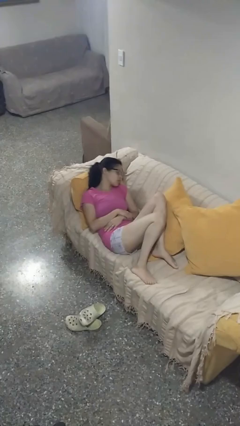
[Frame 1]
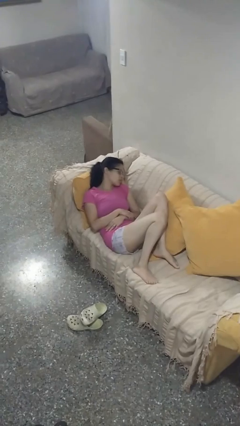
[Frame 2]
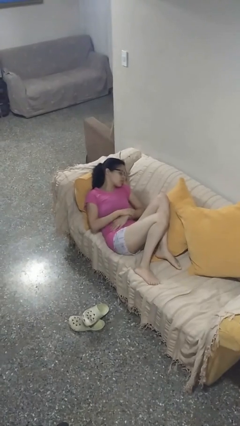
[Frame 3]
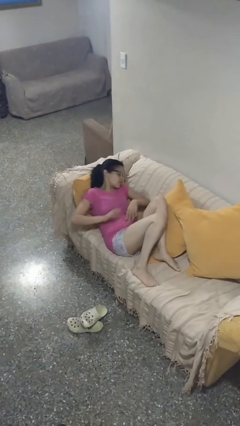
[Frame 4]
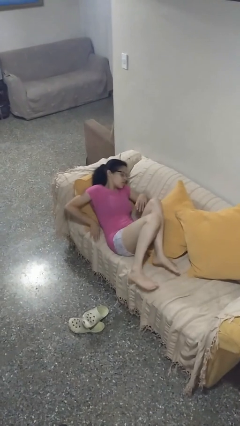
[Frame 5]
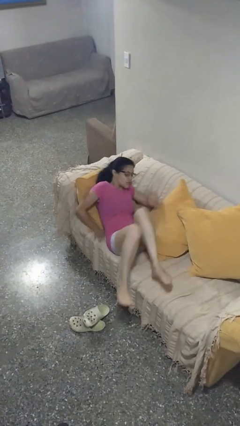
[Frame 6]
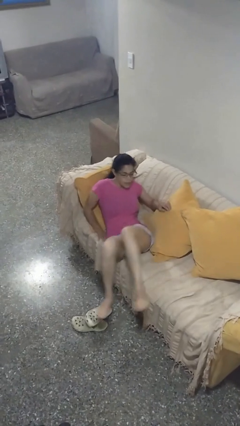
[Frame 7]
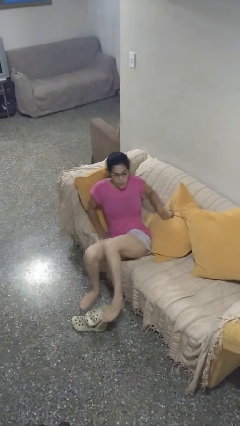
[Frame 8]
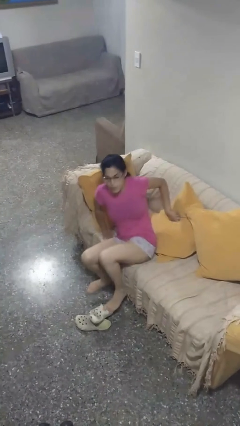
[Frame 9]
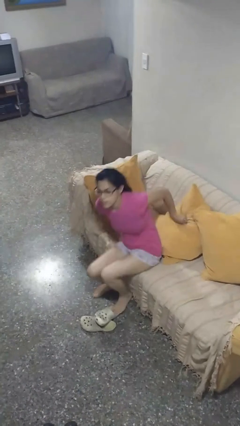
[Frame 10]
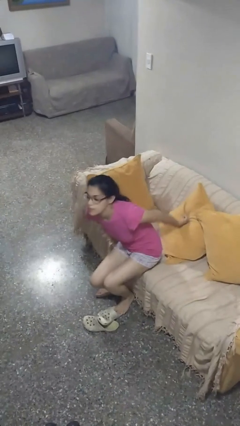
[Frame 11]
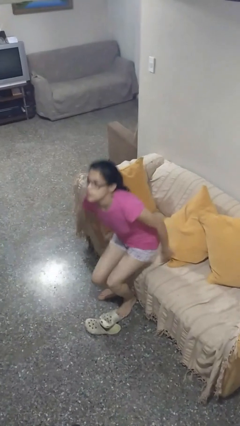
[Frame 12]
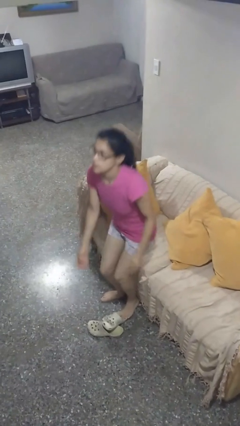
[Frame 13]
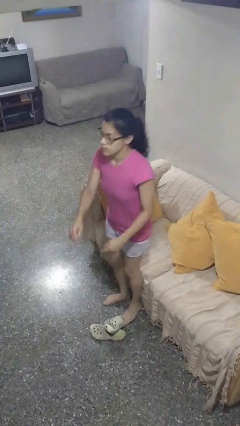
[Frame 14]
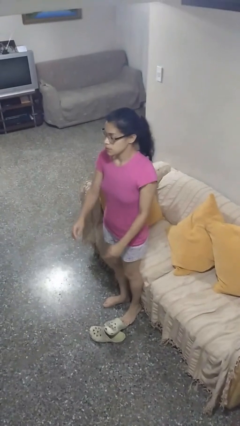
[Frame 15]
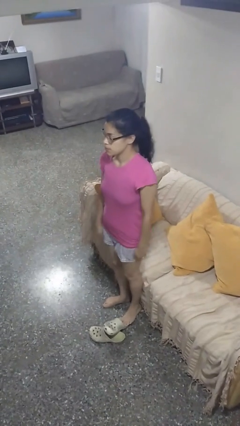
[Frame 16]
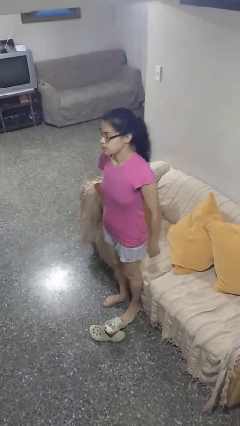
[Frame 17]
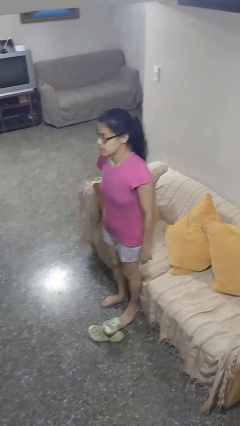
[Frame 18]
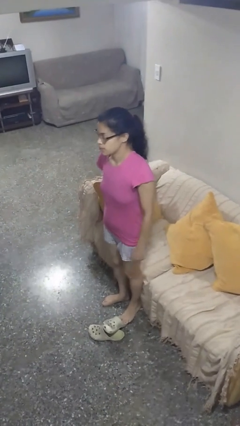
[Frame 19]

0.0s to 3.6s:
person stands up

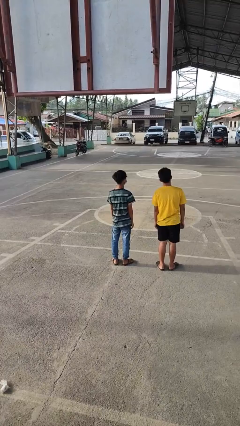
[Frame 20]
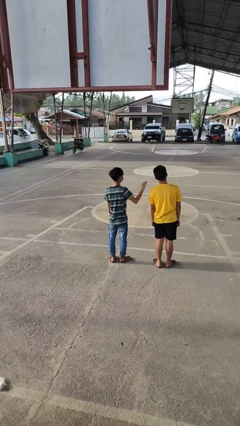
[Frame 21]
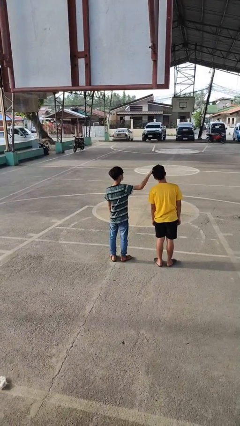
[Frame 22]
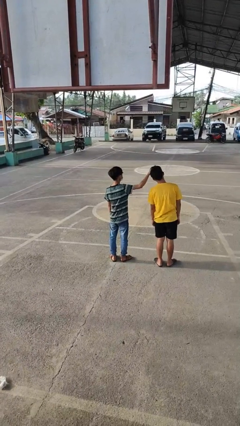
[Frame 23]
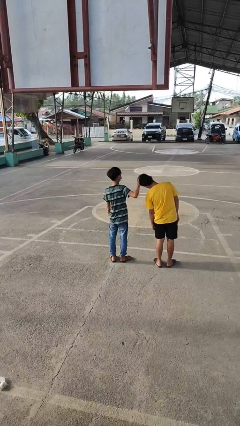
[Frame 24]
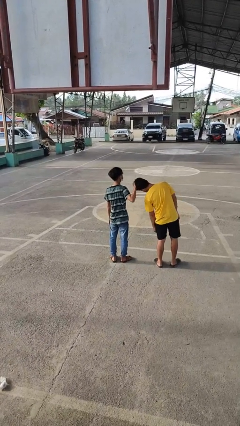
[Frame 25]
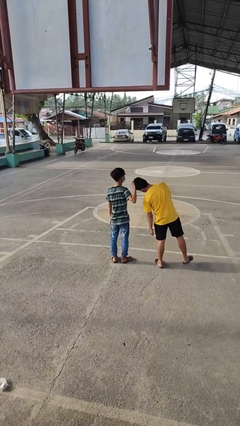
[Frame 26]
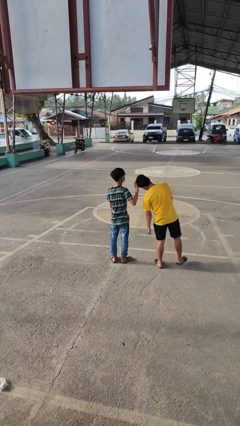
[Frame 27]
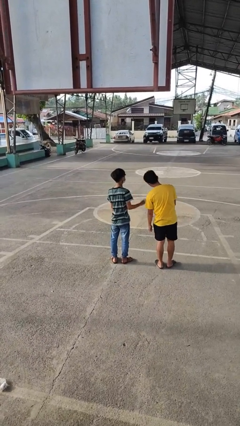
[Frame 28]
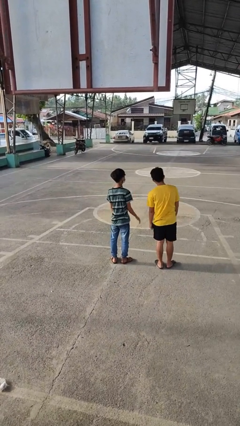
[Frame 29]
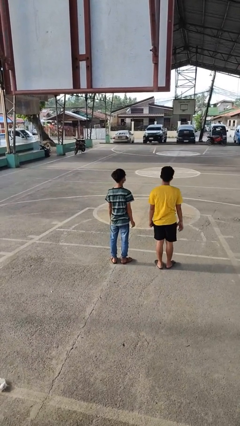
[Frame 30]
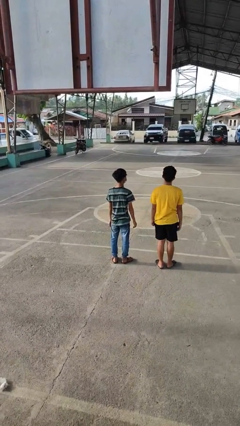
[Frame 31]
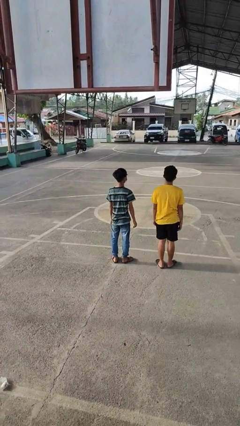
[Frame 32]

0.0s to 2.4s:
person grabs person by hair

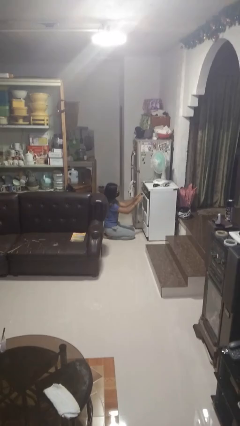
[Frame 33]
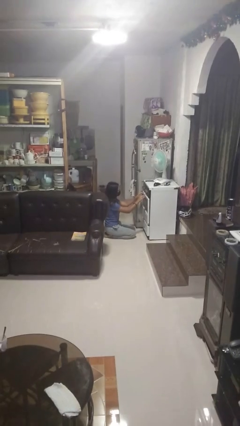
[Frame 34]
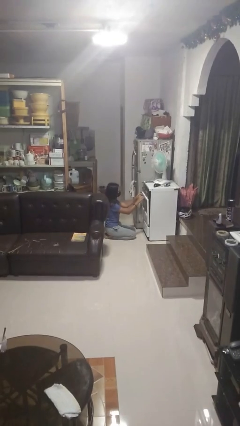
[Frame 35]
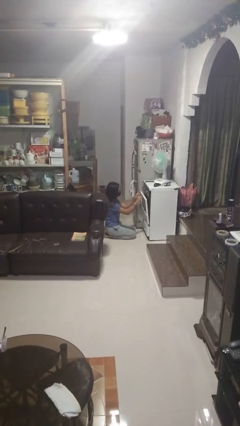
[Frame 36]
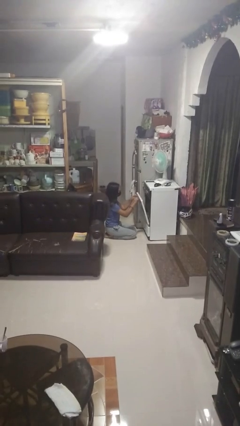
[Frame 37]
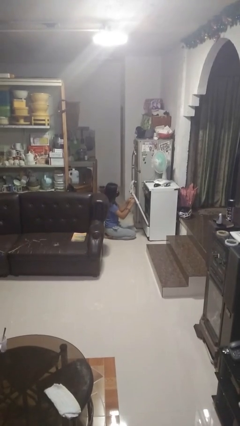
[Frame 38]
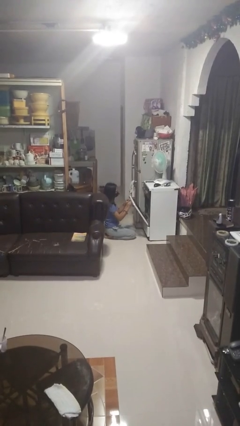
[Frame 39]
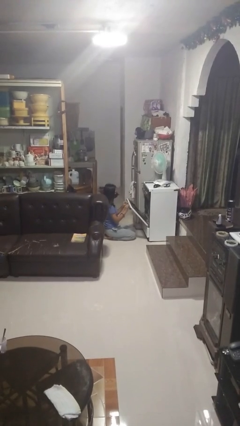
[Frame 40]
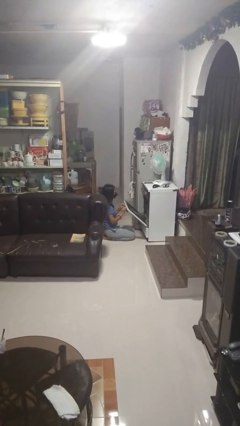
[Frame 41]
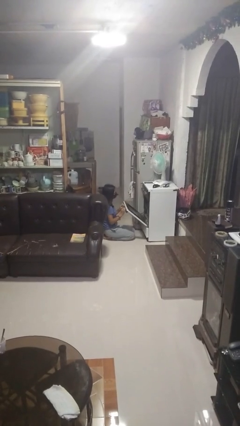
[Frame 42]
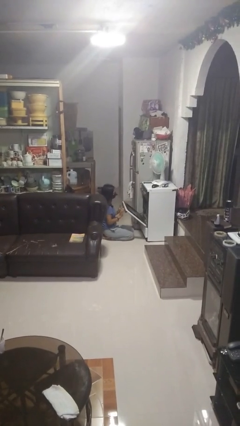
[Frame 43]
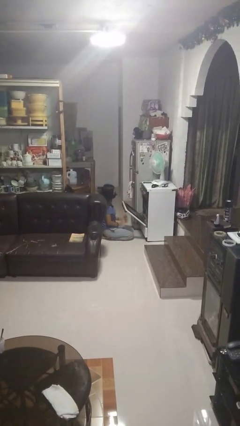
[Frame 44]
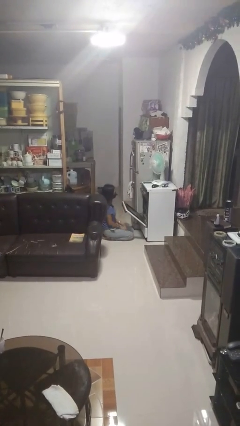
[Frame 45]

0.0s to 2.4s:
person opens oven door

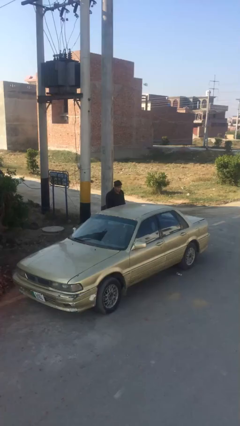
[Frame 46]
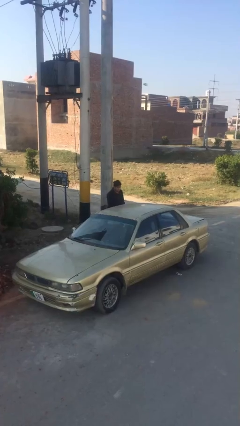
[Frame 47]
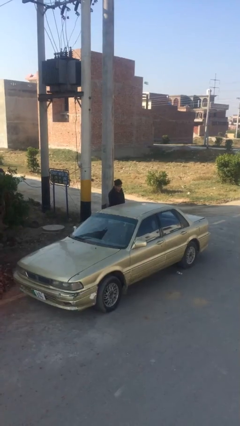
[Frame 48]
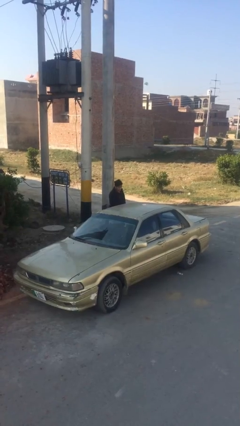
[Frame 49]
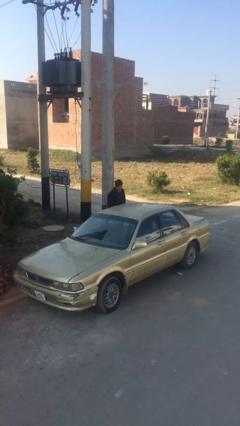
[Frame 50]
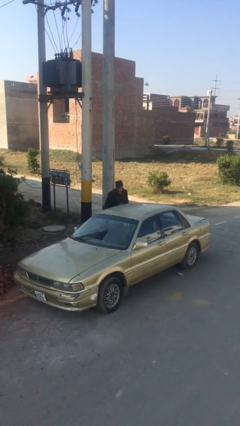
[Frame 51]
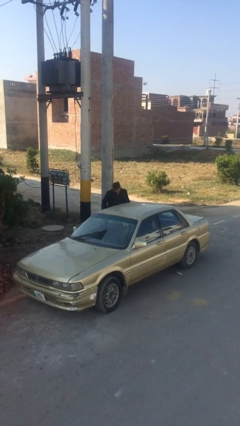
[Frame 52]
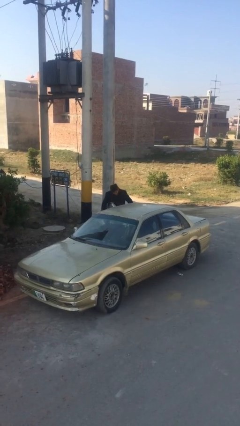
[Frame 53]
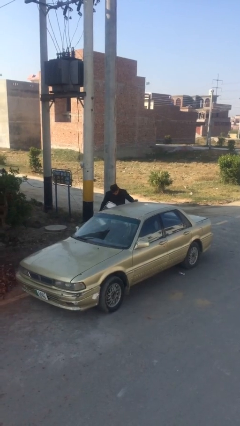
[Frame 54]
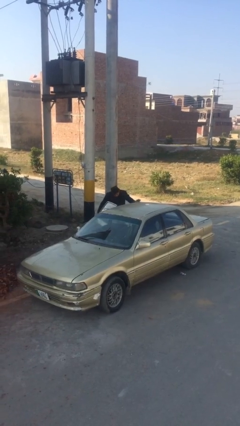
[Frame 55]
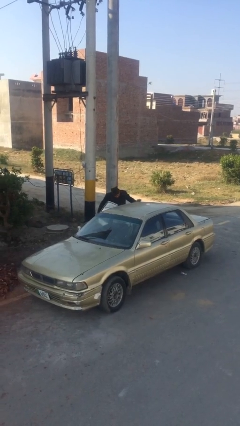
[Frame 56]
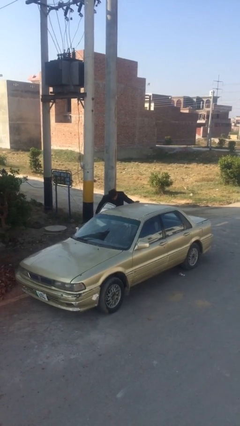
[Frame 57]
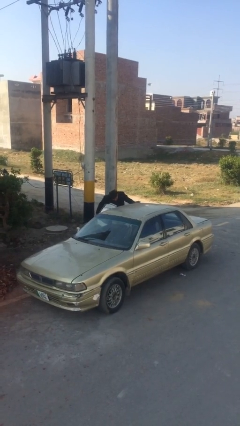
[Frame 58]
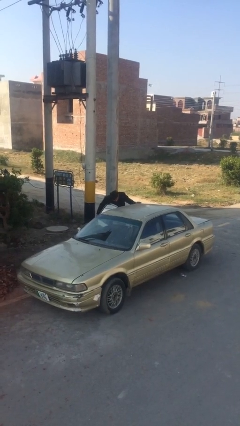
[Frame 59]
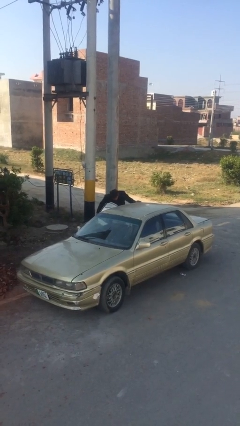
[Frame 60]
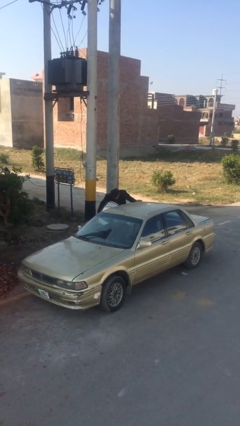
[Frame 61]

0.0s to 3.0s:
person opens car door

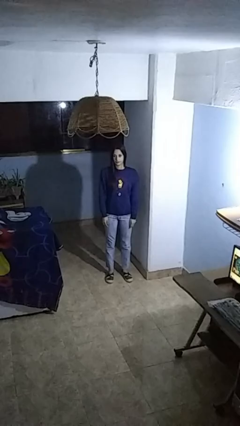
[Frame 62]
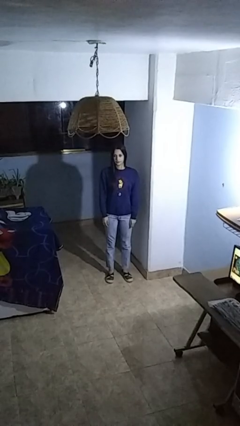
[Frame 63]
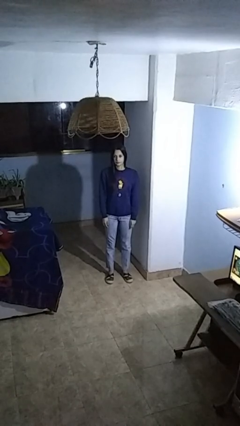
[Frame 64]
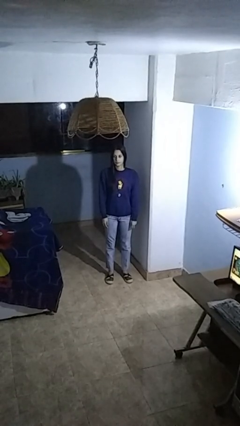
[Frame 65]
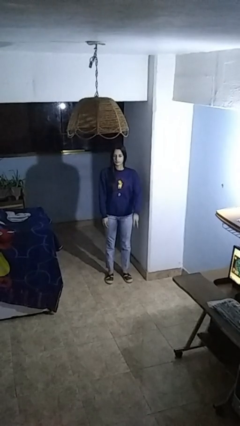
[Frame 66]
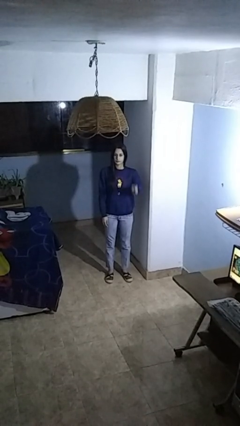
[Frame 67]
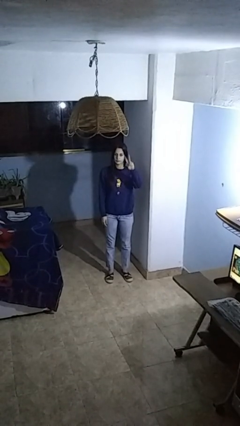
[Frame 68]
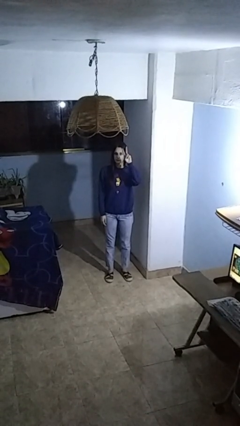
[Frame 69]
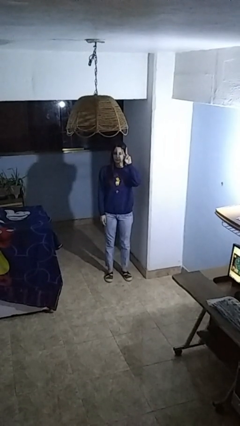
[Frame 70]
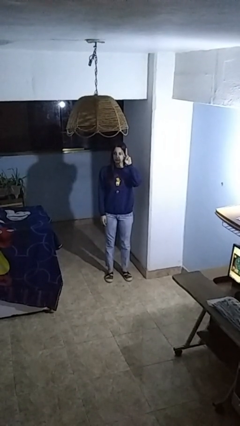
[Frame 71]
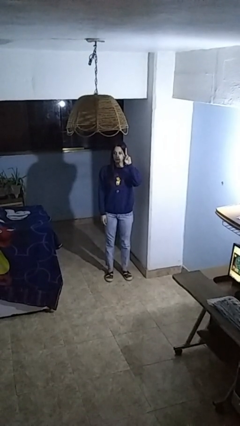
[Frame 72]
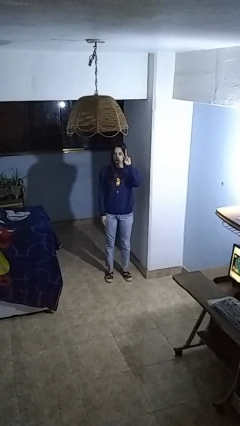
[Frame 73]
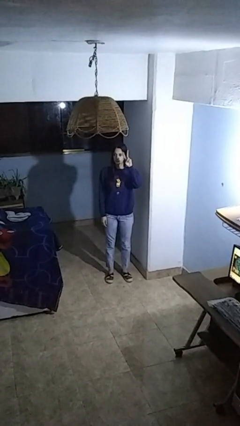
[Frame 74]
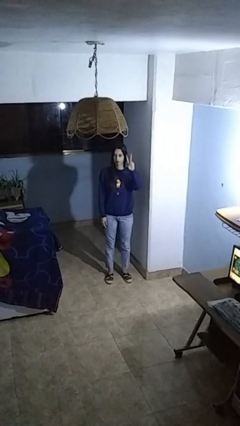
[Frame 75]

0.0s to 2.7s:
person gestures peace

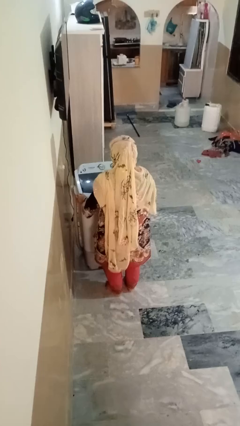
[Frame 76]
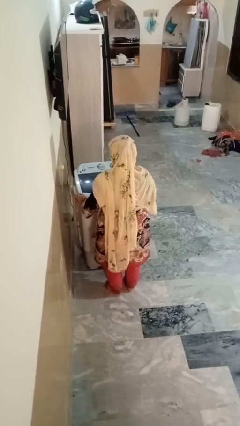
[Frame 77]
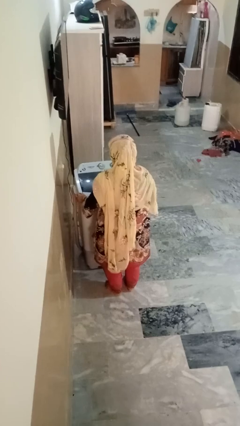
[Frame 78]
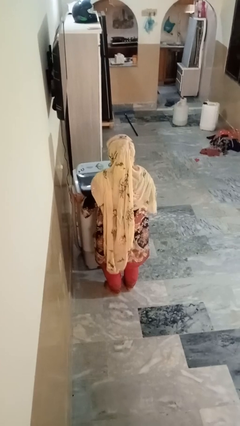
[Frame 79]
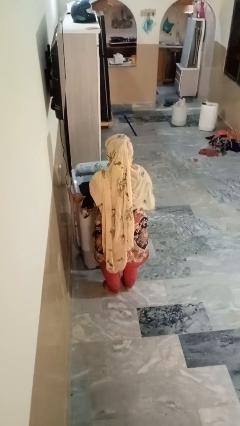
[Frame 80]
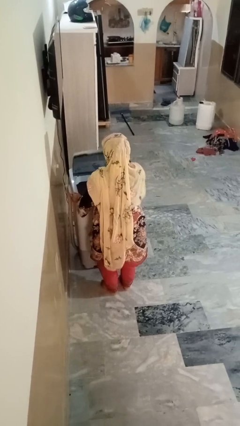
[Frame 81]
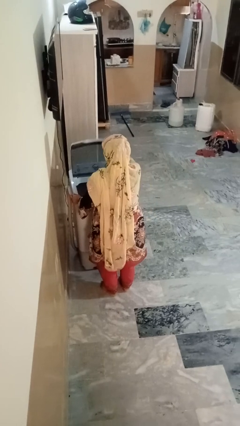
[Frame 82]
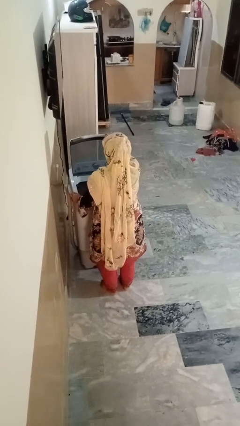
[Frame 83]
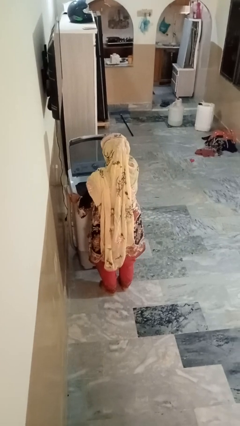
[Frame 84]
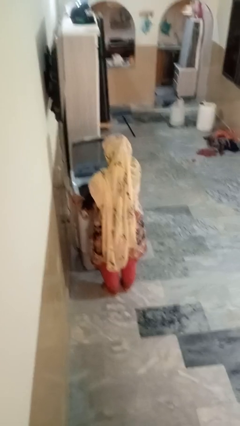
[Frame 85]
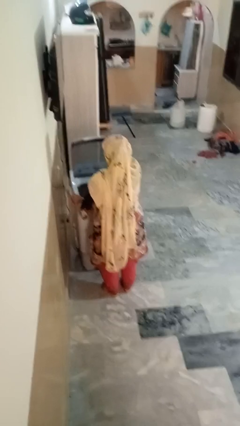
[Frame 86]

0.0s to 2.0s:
person opens clothes washer

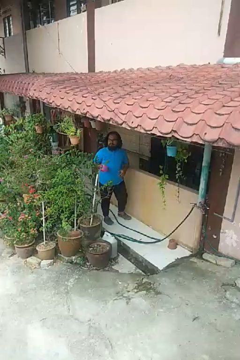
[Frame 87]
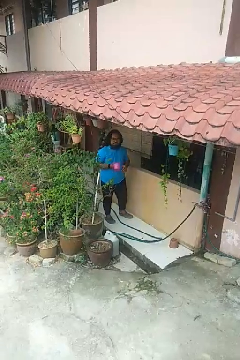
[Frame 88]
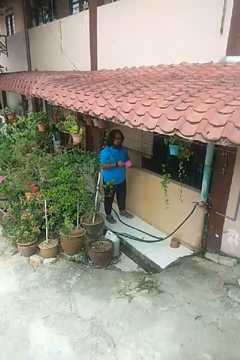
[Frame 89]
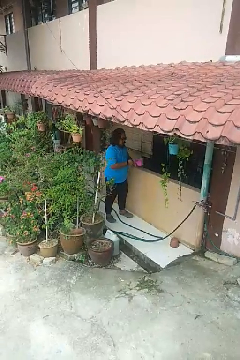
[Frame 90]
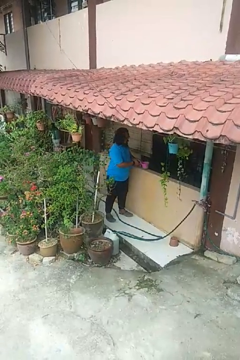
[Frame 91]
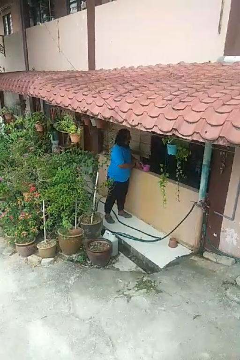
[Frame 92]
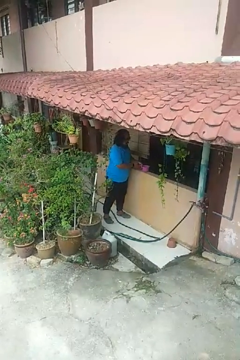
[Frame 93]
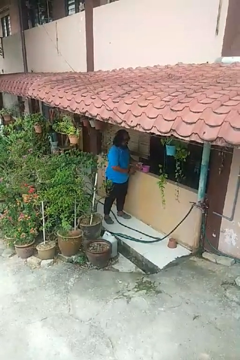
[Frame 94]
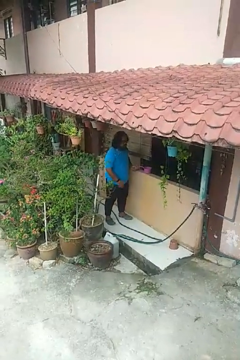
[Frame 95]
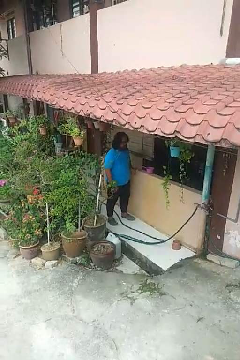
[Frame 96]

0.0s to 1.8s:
person puts down object on countertop
